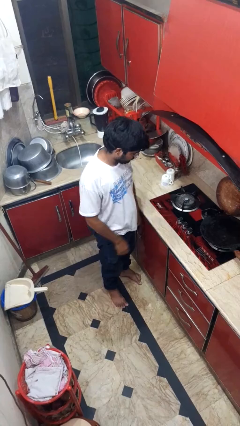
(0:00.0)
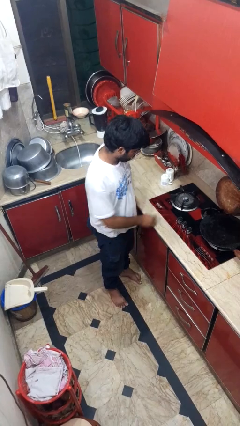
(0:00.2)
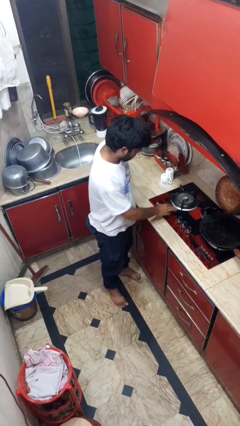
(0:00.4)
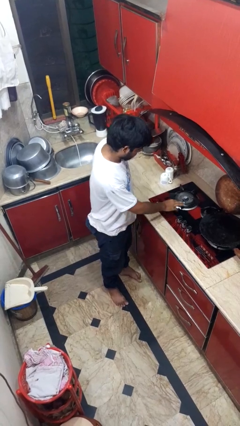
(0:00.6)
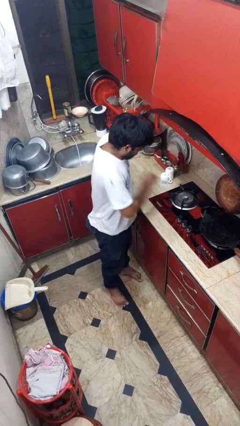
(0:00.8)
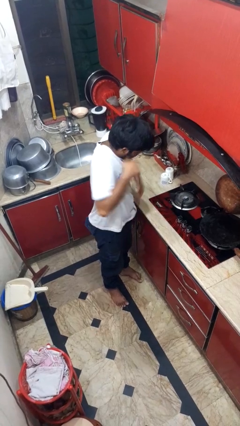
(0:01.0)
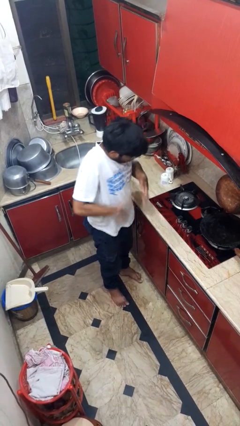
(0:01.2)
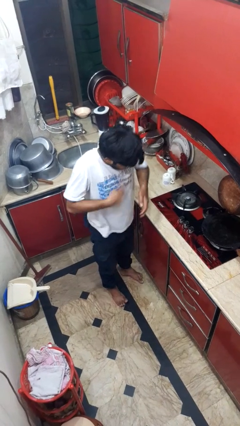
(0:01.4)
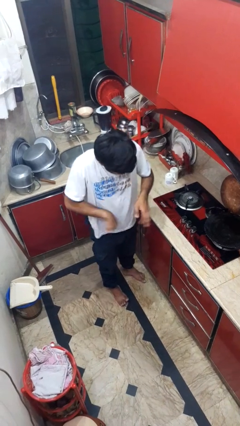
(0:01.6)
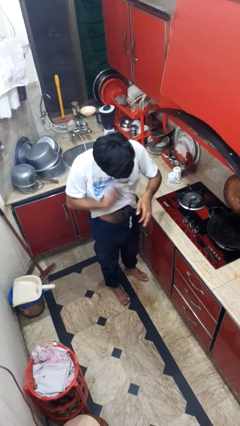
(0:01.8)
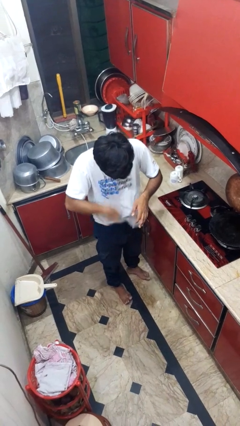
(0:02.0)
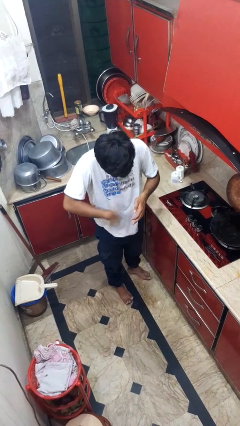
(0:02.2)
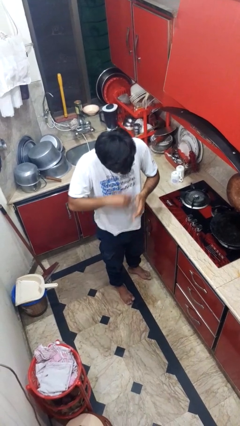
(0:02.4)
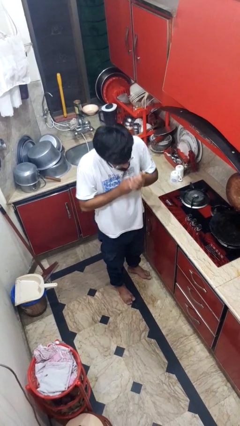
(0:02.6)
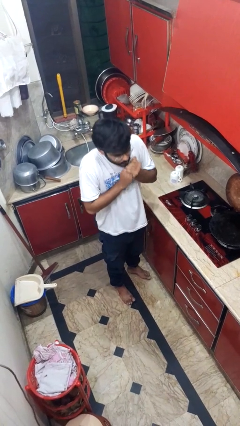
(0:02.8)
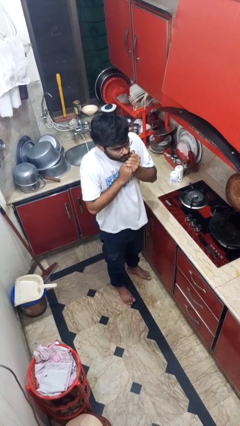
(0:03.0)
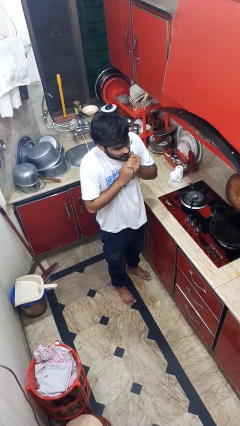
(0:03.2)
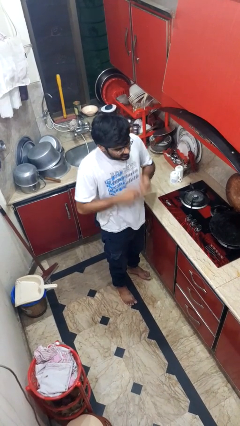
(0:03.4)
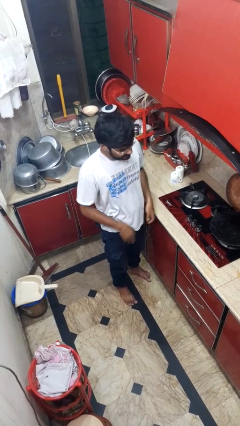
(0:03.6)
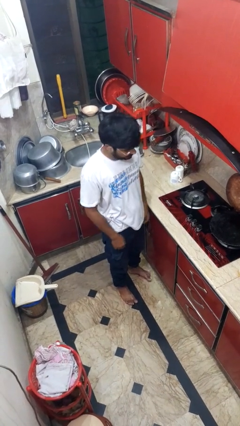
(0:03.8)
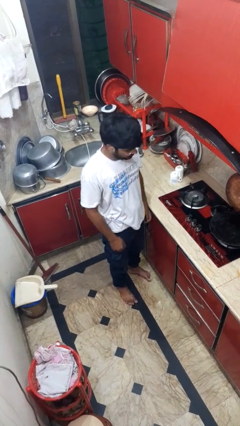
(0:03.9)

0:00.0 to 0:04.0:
person burns hand

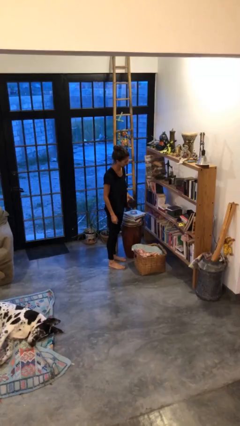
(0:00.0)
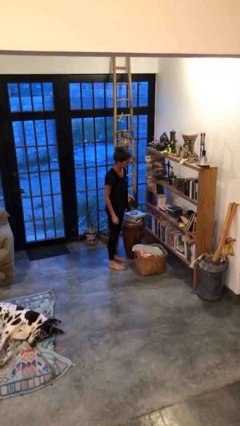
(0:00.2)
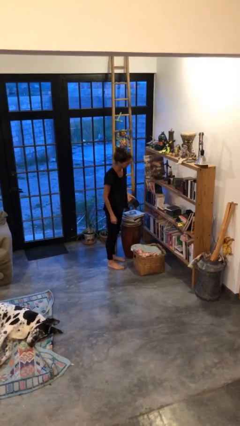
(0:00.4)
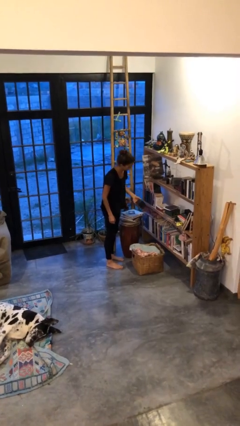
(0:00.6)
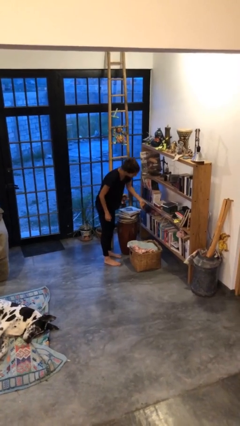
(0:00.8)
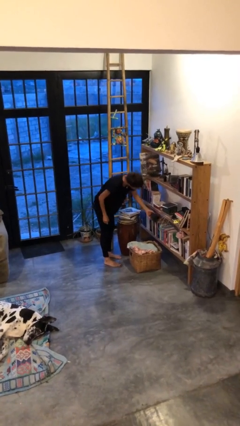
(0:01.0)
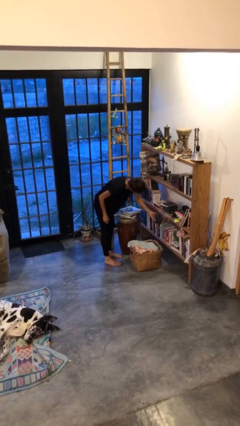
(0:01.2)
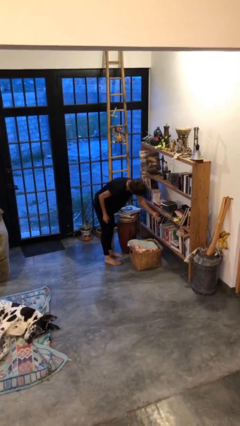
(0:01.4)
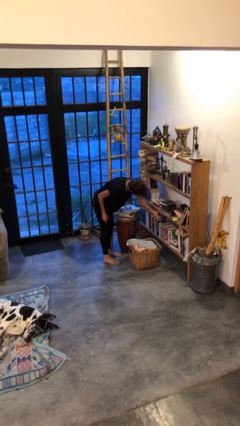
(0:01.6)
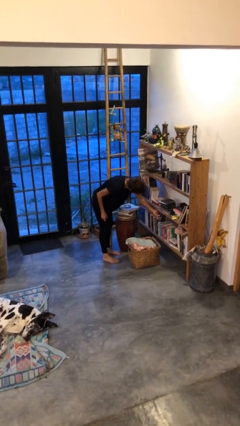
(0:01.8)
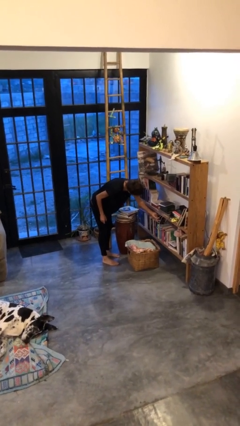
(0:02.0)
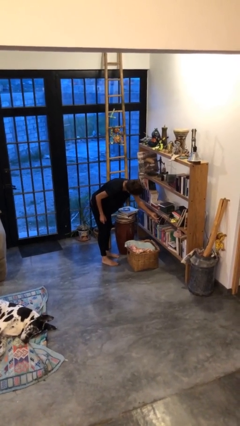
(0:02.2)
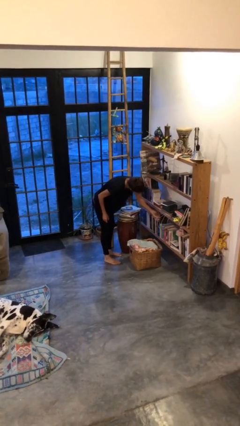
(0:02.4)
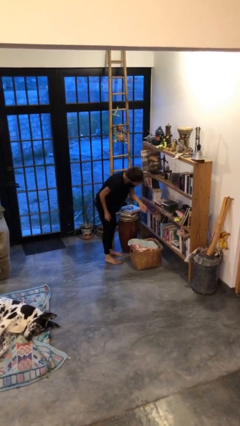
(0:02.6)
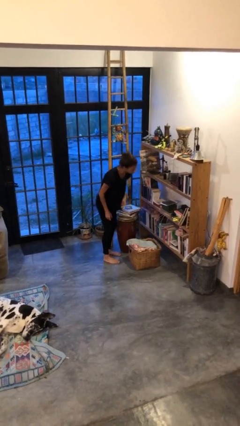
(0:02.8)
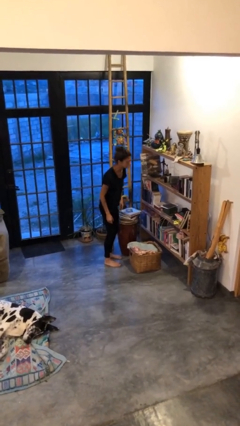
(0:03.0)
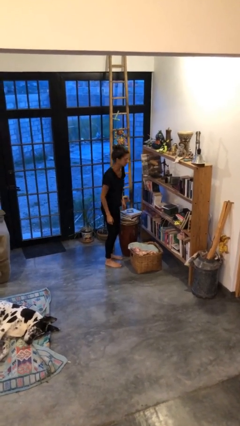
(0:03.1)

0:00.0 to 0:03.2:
person puts down object into cabinet

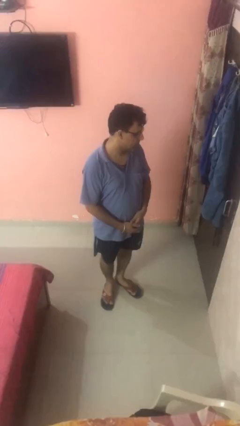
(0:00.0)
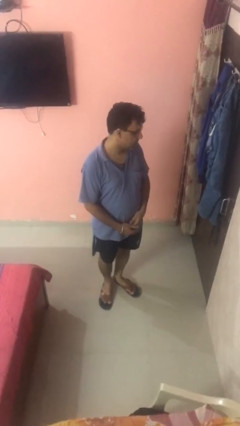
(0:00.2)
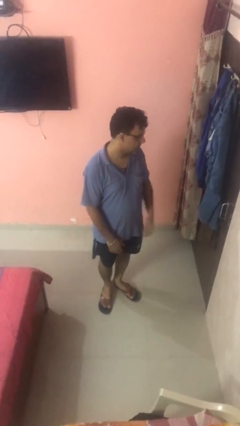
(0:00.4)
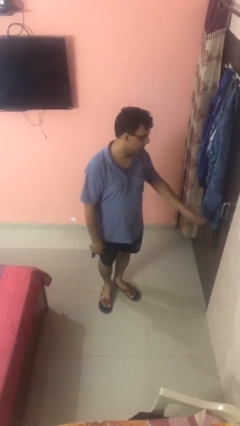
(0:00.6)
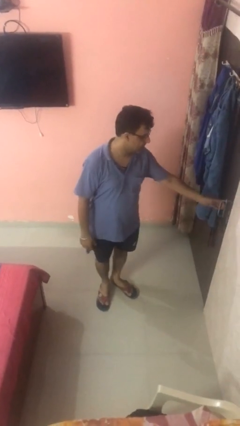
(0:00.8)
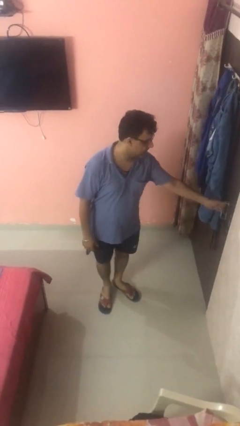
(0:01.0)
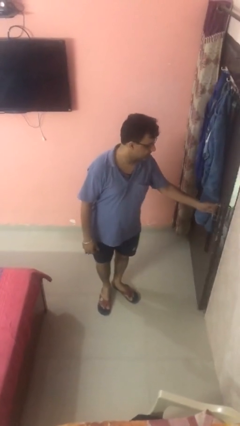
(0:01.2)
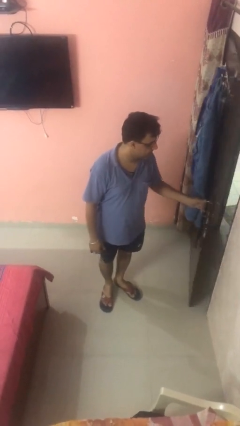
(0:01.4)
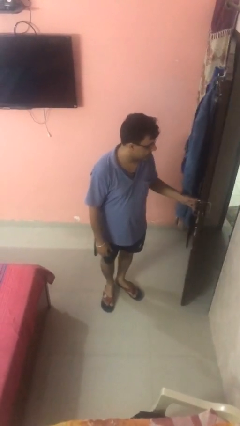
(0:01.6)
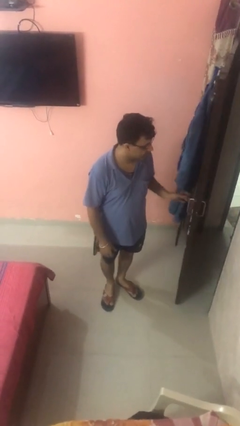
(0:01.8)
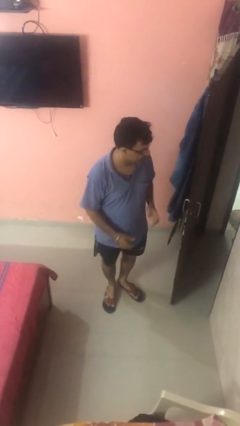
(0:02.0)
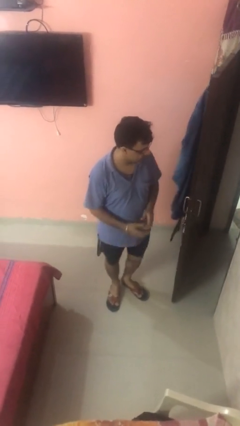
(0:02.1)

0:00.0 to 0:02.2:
person opens facility door

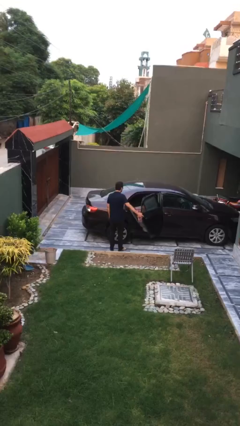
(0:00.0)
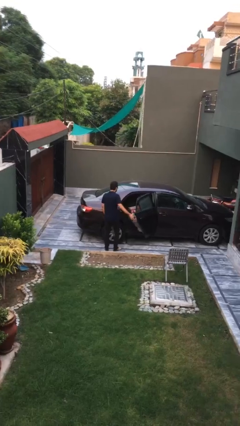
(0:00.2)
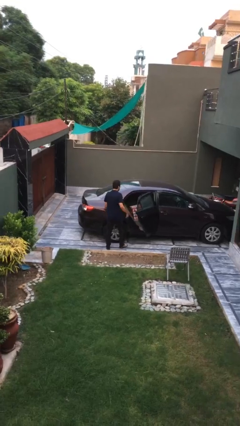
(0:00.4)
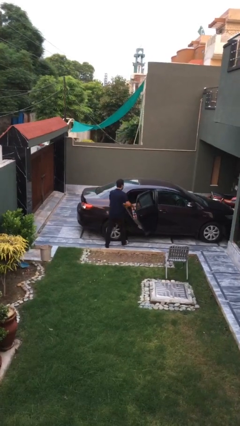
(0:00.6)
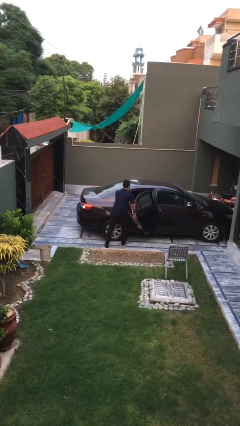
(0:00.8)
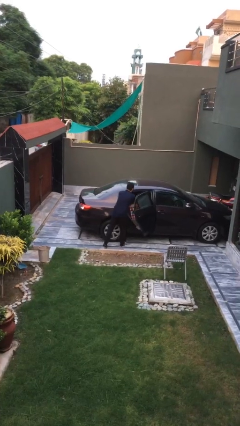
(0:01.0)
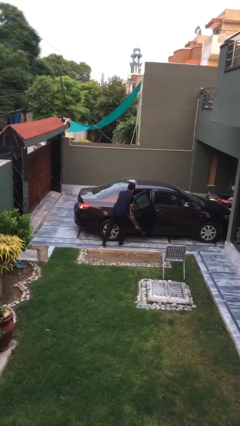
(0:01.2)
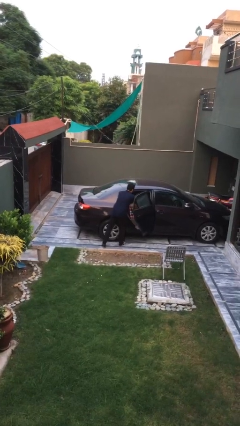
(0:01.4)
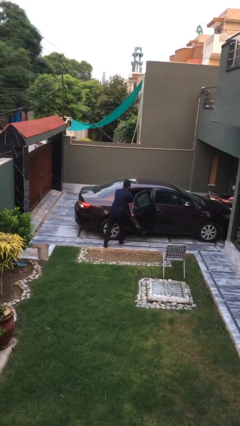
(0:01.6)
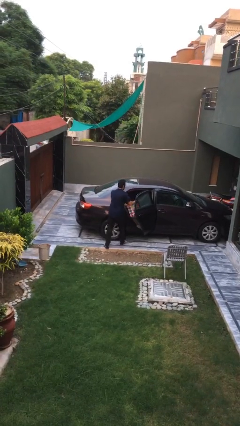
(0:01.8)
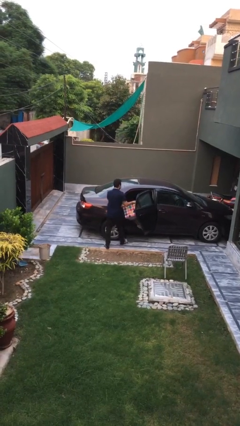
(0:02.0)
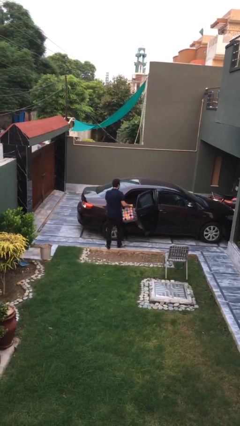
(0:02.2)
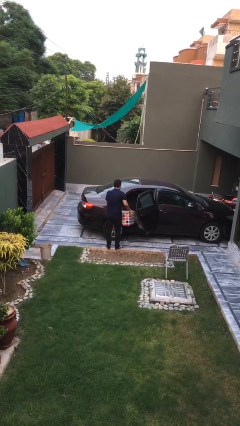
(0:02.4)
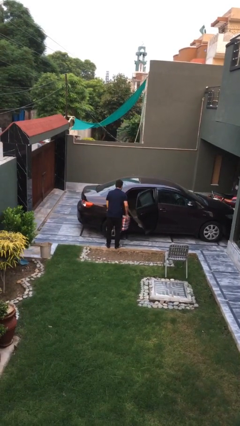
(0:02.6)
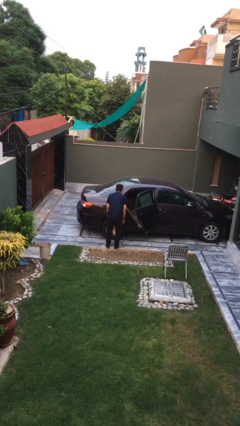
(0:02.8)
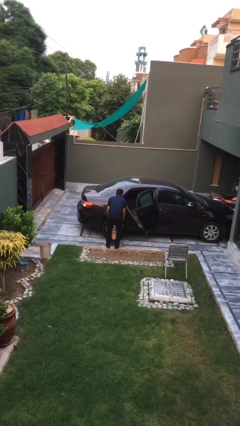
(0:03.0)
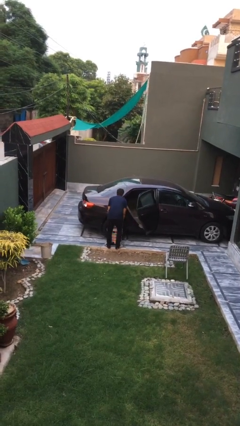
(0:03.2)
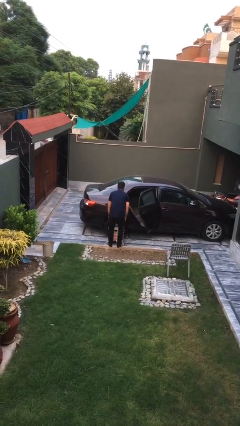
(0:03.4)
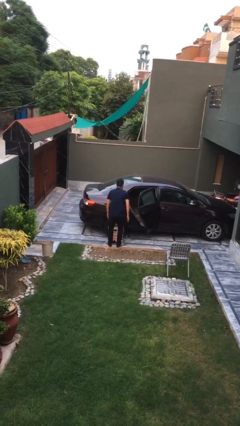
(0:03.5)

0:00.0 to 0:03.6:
person unloads car

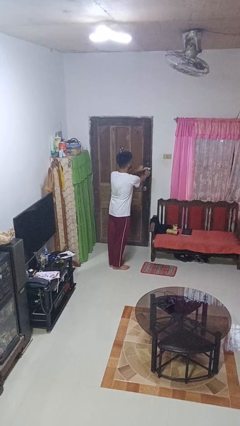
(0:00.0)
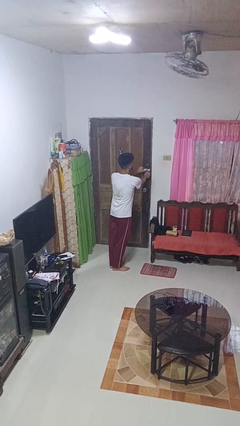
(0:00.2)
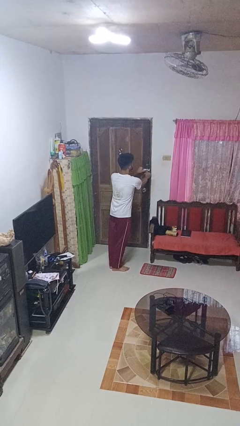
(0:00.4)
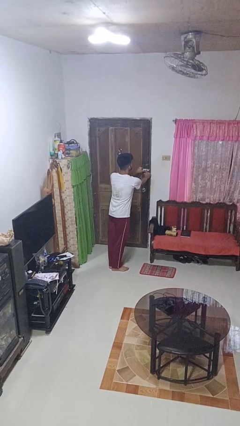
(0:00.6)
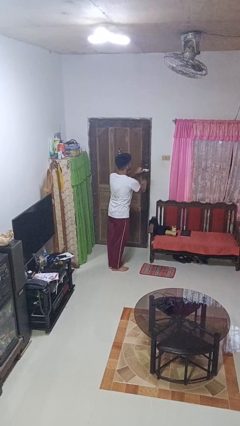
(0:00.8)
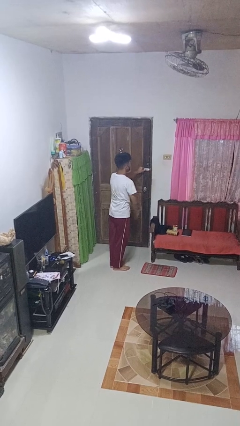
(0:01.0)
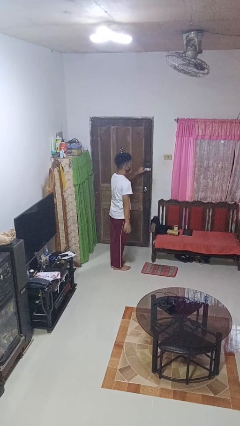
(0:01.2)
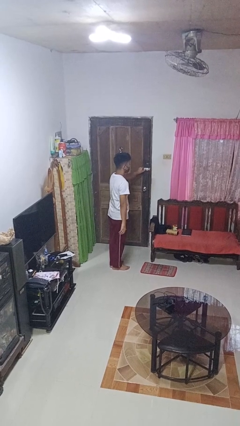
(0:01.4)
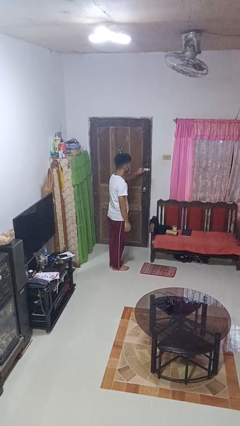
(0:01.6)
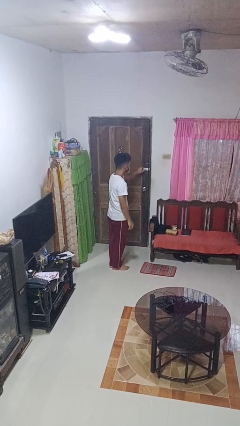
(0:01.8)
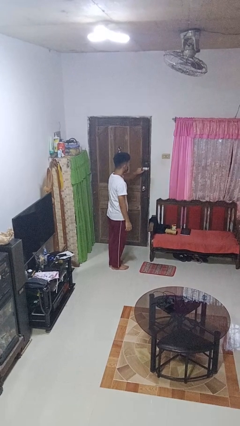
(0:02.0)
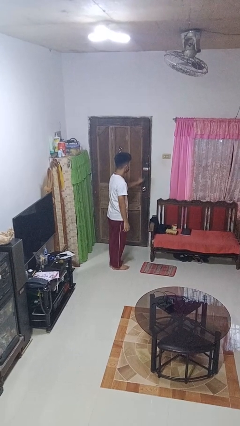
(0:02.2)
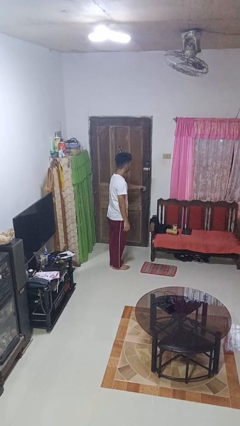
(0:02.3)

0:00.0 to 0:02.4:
person unlocks door with keys

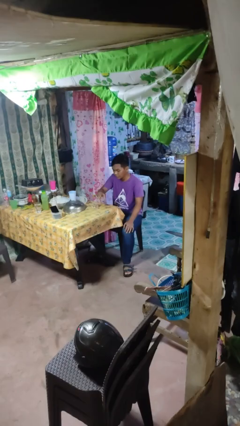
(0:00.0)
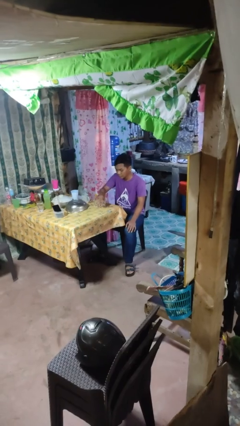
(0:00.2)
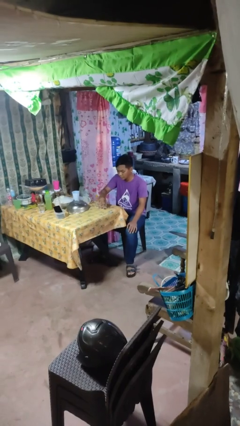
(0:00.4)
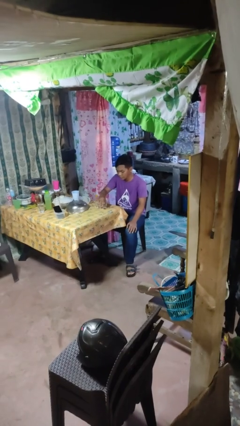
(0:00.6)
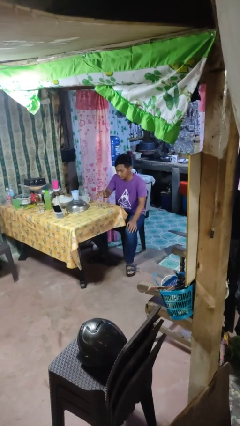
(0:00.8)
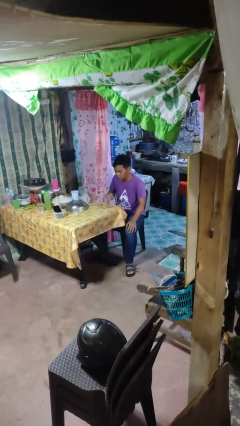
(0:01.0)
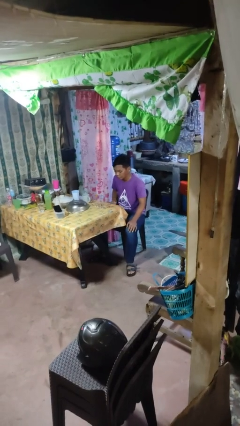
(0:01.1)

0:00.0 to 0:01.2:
person puts down object on table

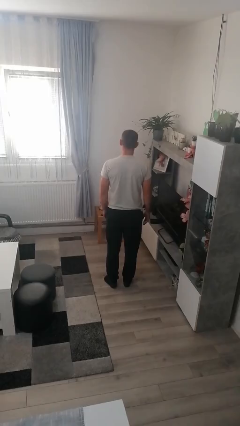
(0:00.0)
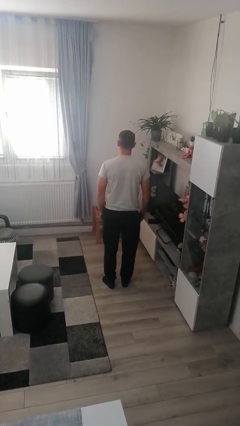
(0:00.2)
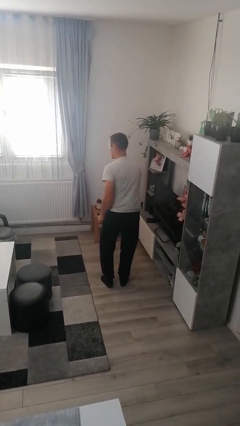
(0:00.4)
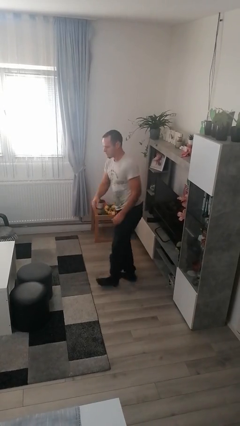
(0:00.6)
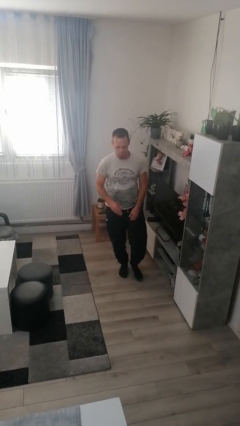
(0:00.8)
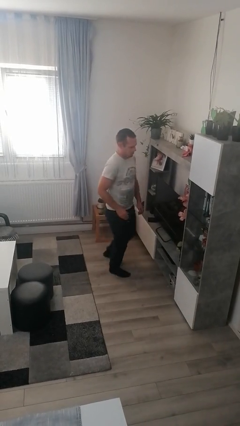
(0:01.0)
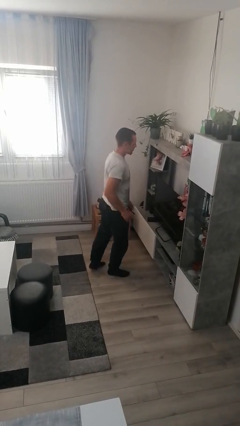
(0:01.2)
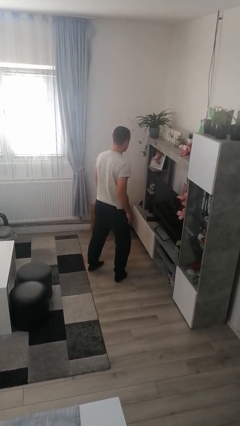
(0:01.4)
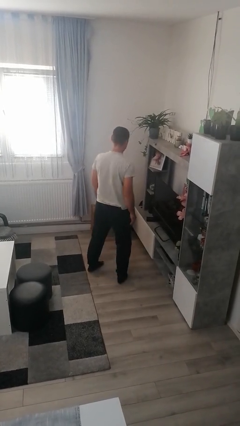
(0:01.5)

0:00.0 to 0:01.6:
person twirls
